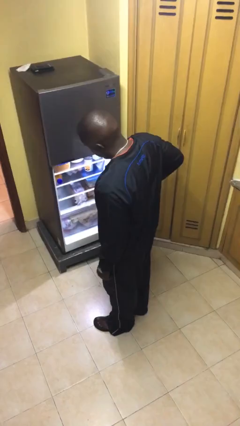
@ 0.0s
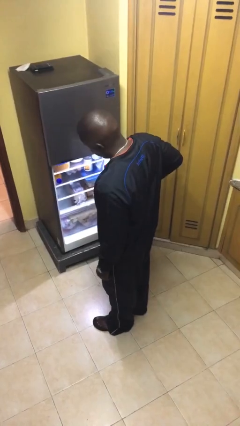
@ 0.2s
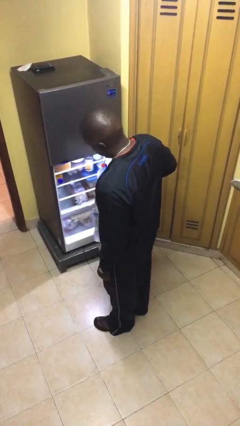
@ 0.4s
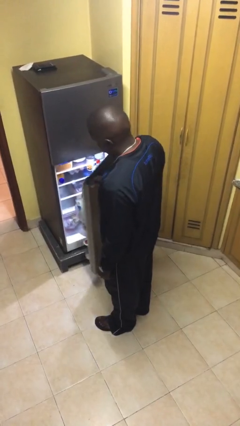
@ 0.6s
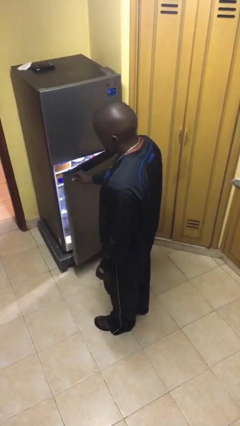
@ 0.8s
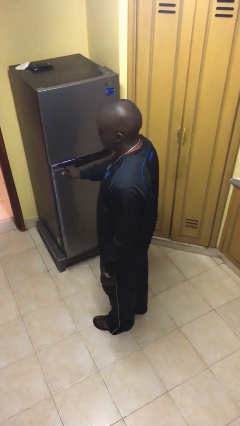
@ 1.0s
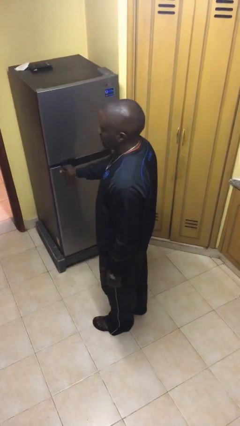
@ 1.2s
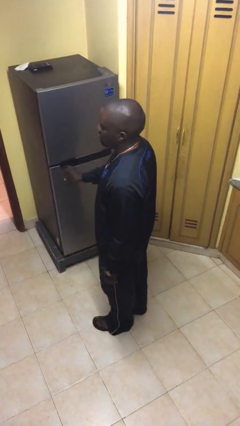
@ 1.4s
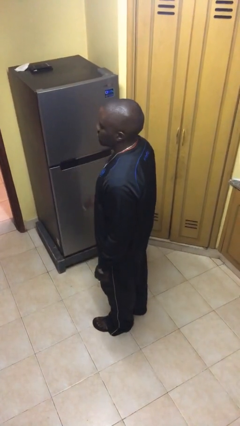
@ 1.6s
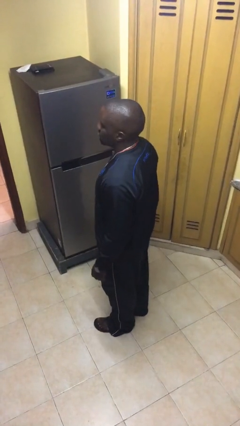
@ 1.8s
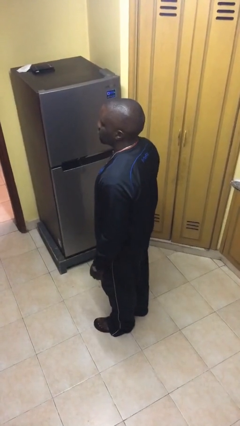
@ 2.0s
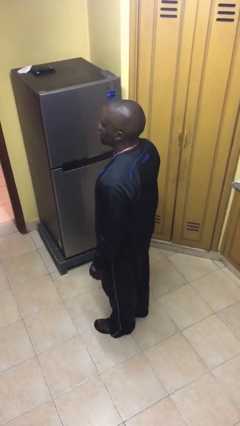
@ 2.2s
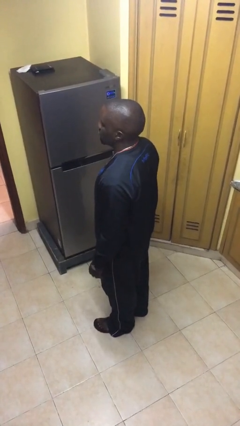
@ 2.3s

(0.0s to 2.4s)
person closes refrigerator

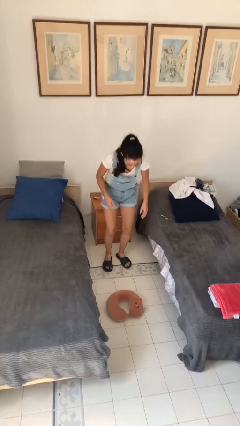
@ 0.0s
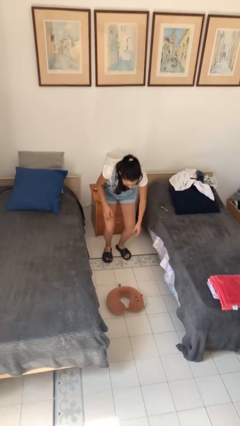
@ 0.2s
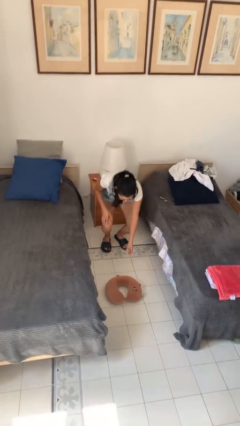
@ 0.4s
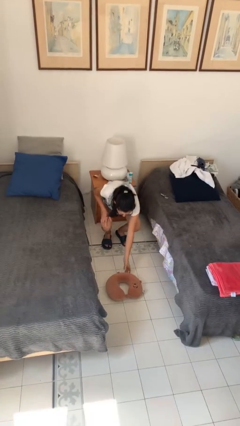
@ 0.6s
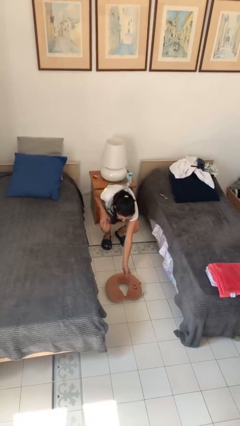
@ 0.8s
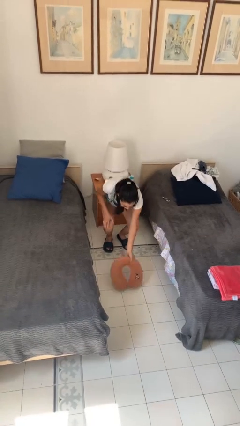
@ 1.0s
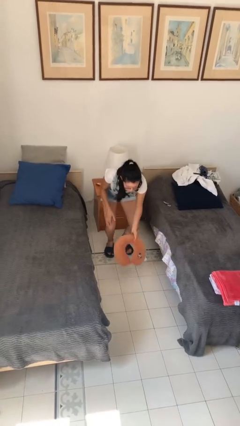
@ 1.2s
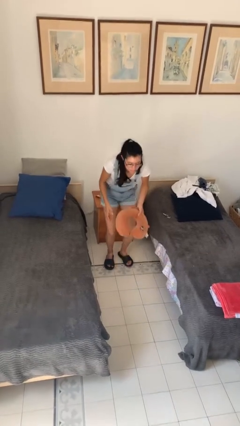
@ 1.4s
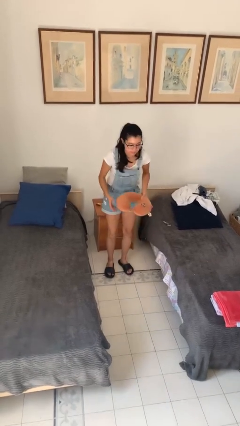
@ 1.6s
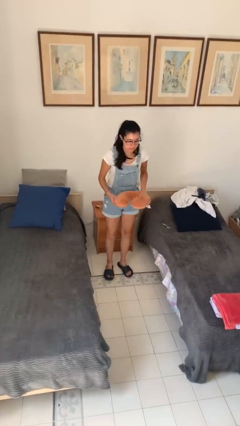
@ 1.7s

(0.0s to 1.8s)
person picks up object from floor

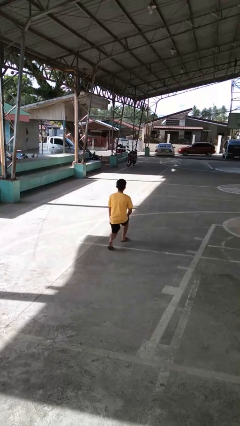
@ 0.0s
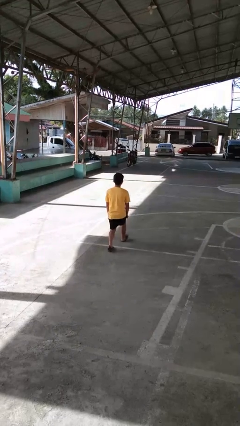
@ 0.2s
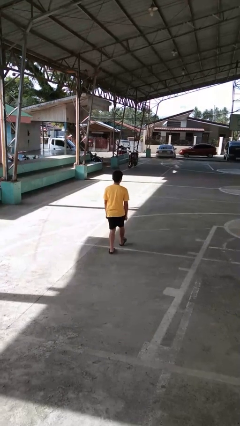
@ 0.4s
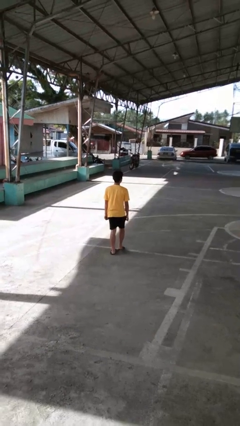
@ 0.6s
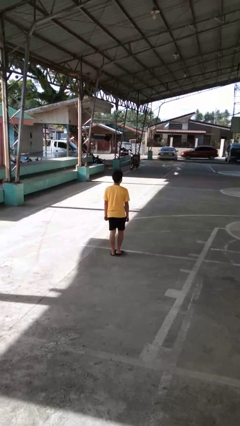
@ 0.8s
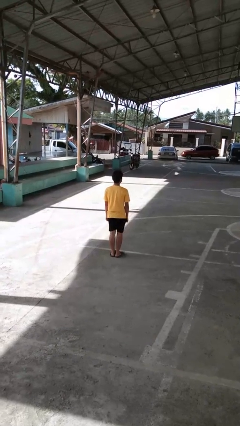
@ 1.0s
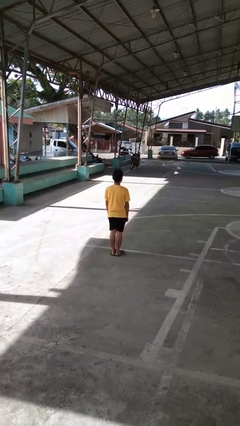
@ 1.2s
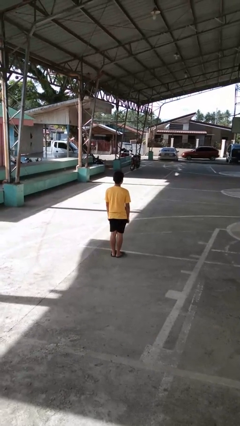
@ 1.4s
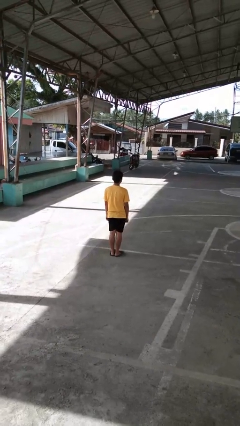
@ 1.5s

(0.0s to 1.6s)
person stands up from floor

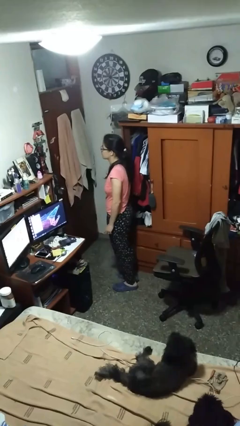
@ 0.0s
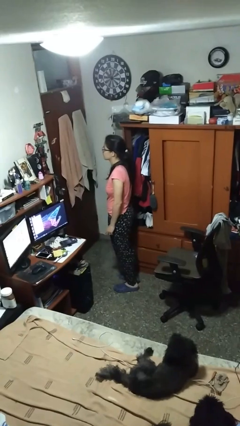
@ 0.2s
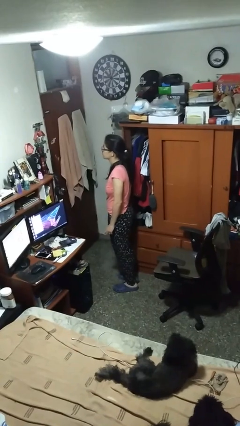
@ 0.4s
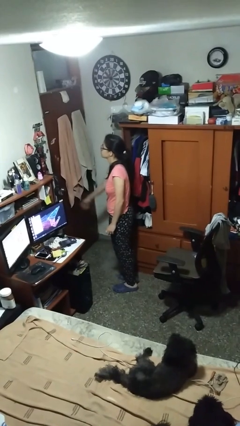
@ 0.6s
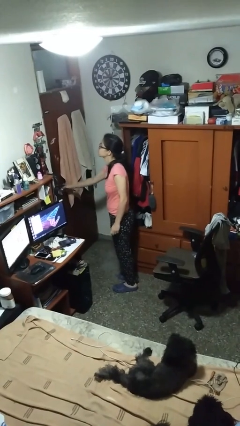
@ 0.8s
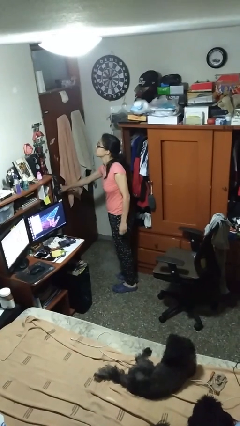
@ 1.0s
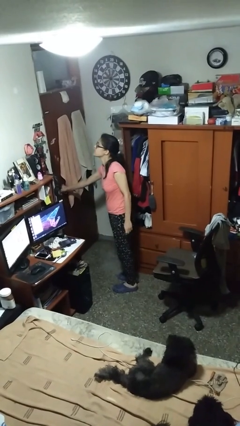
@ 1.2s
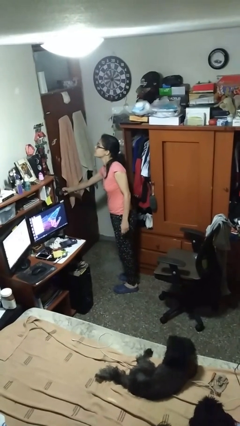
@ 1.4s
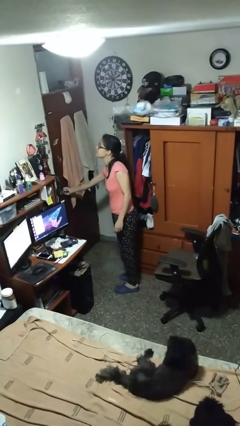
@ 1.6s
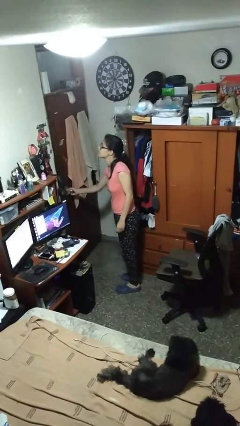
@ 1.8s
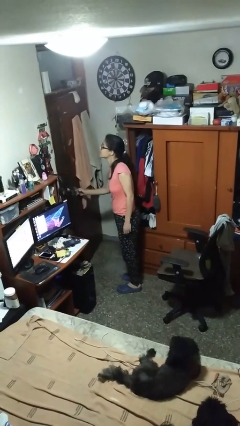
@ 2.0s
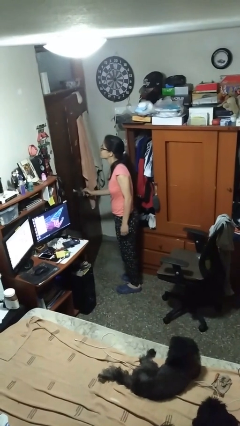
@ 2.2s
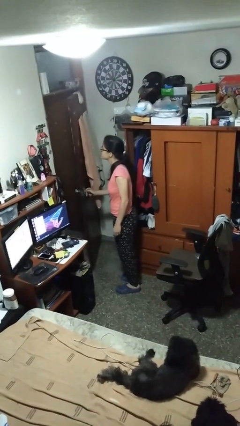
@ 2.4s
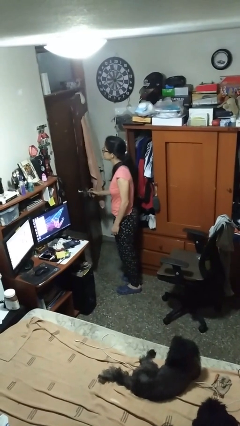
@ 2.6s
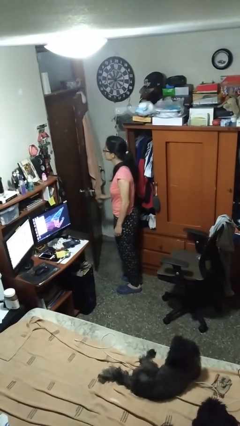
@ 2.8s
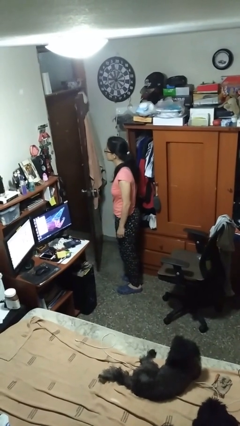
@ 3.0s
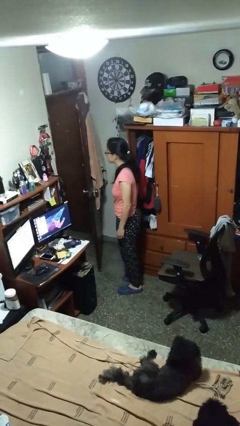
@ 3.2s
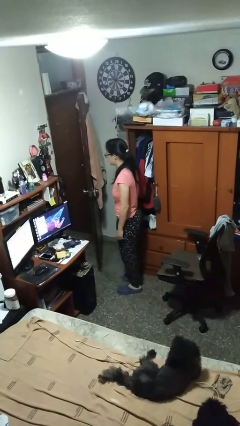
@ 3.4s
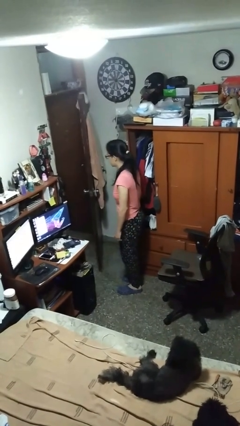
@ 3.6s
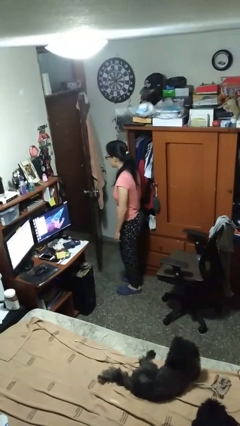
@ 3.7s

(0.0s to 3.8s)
person opens facility door

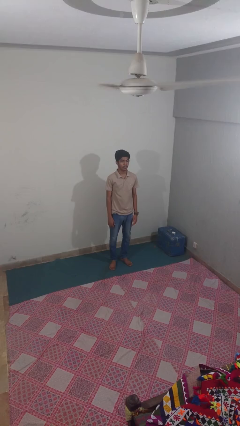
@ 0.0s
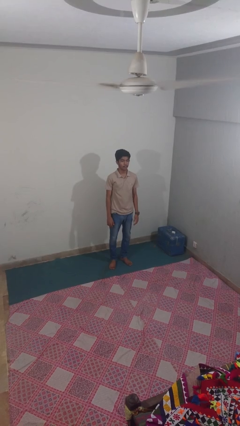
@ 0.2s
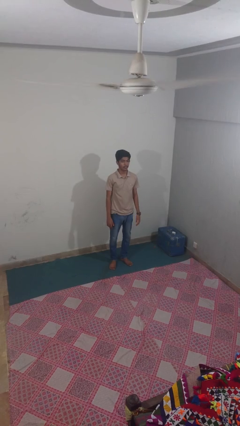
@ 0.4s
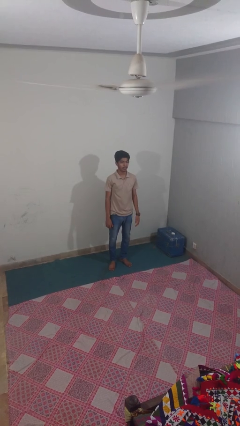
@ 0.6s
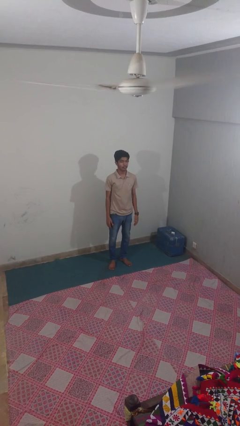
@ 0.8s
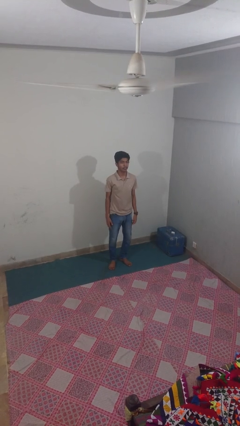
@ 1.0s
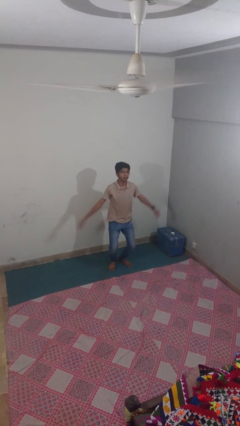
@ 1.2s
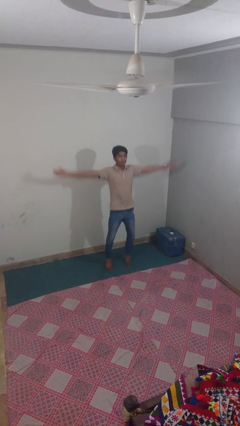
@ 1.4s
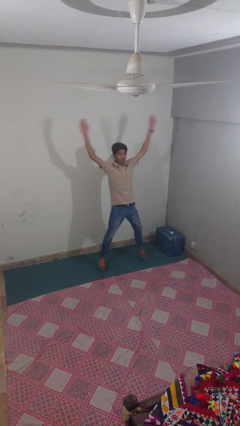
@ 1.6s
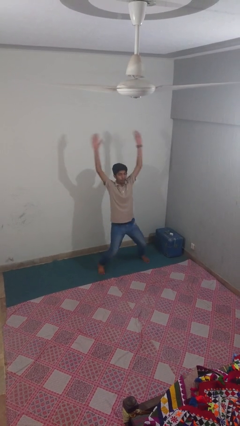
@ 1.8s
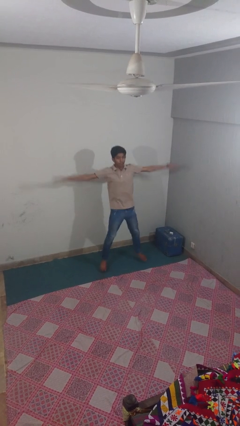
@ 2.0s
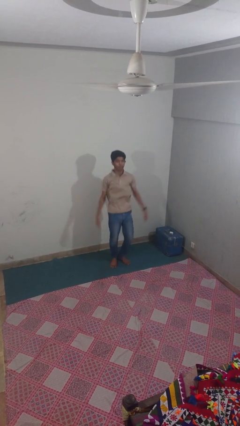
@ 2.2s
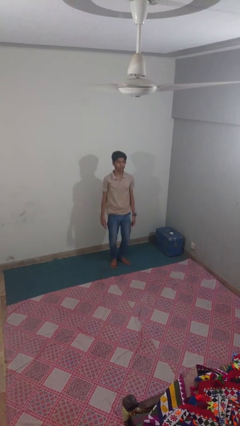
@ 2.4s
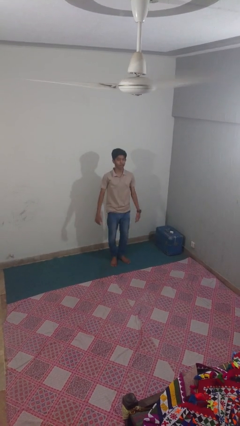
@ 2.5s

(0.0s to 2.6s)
person exercises with jumping jacks

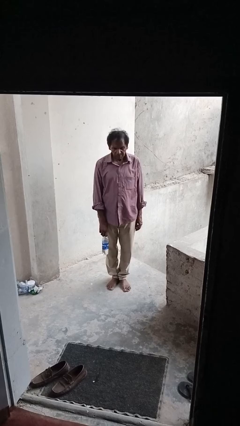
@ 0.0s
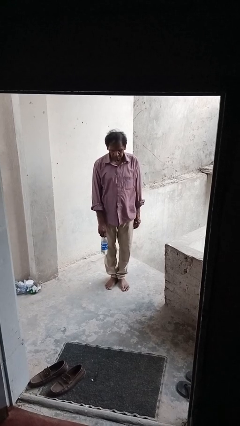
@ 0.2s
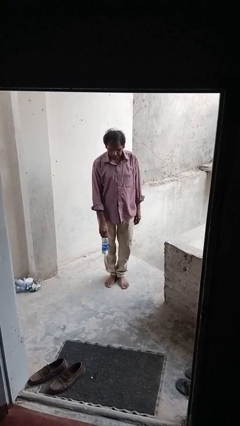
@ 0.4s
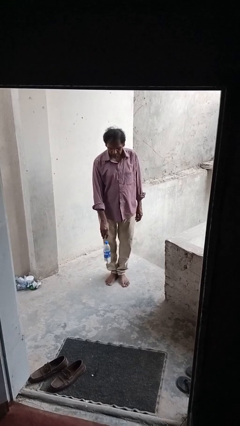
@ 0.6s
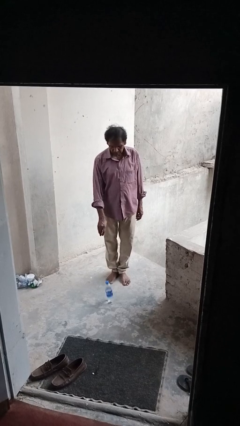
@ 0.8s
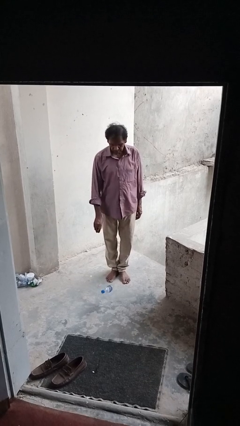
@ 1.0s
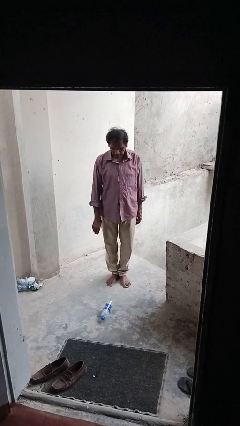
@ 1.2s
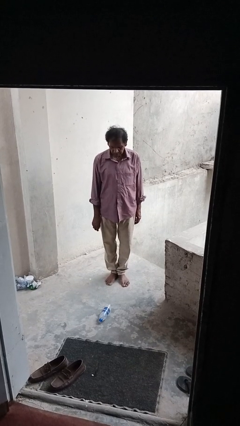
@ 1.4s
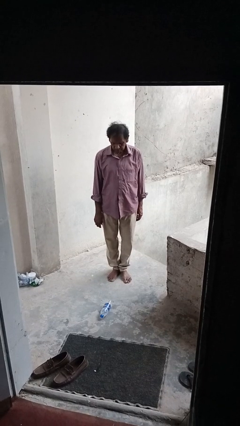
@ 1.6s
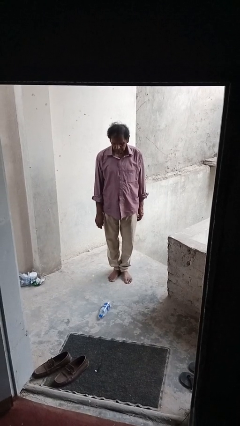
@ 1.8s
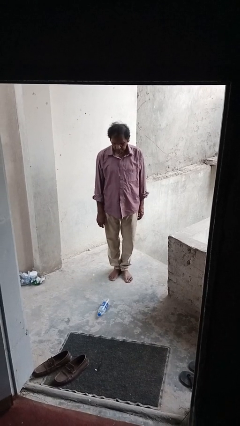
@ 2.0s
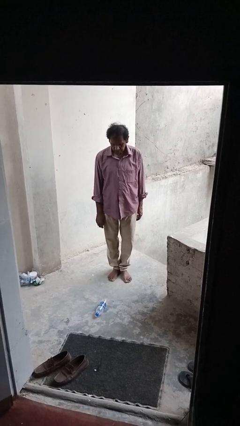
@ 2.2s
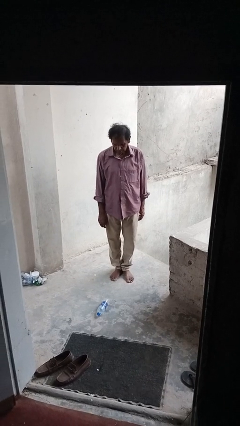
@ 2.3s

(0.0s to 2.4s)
person throws object to ground

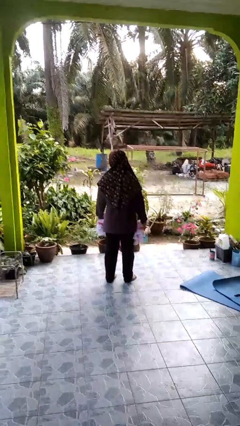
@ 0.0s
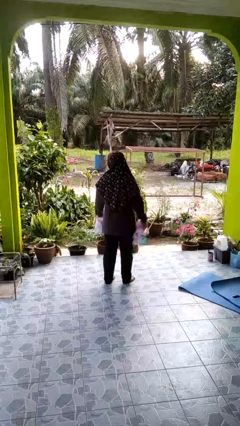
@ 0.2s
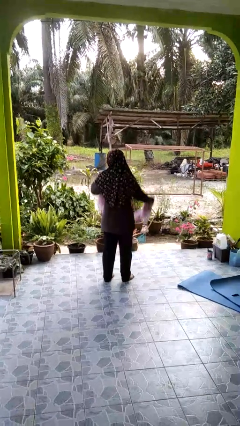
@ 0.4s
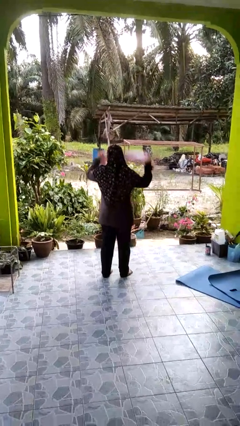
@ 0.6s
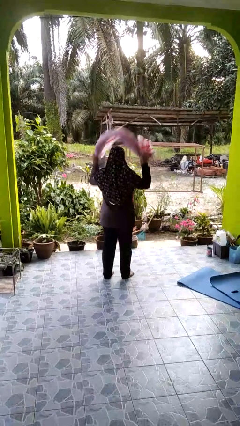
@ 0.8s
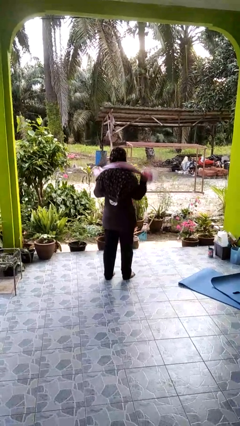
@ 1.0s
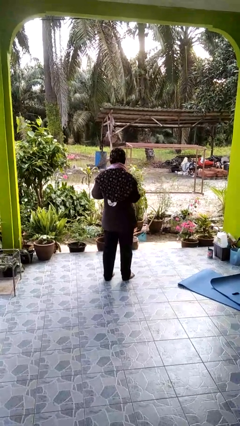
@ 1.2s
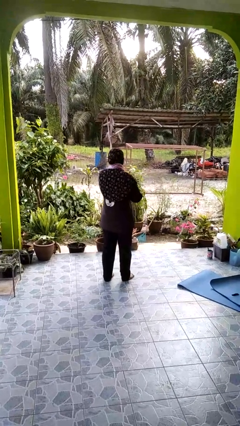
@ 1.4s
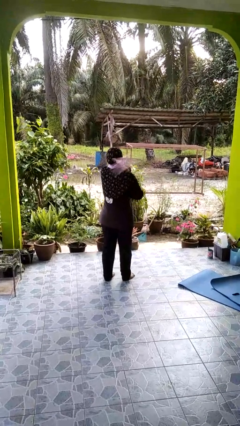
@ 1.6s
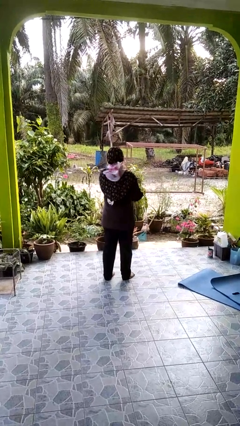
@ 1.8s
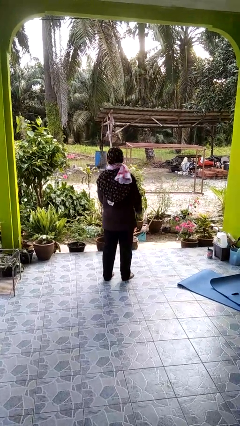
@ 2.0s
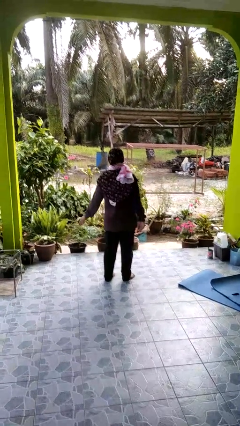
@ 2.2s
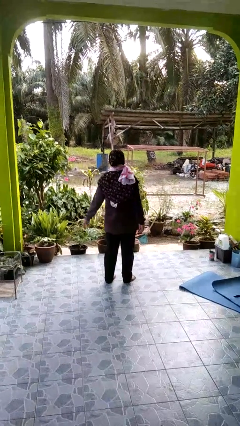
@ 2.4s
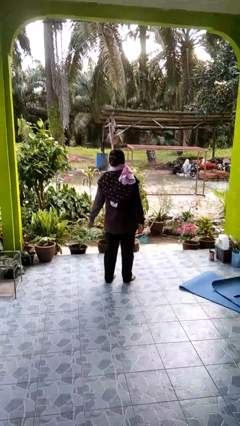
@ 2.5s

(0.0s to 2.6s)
person puts on scarf
